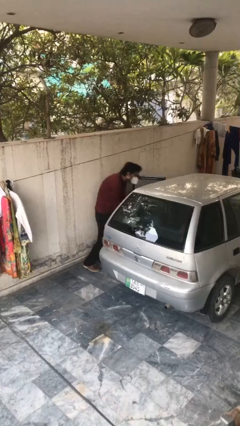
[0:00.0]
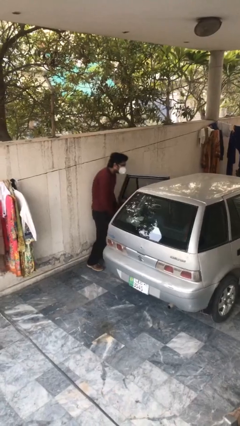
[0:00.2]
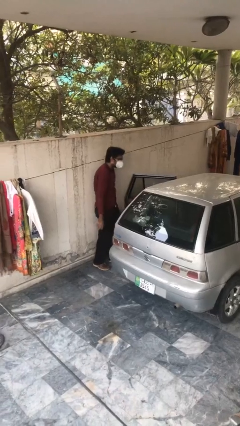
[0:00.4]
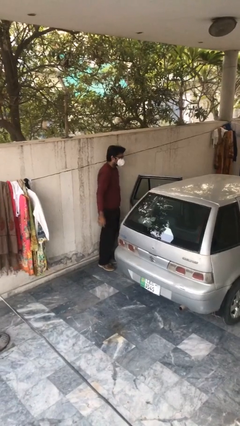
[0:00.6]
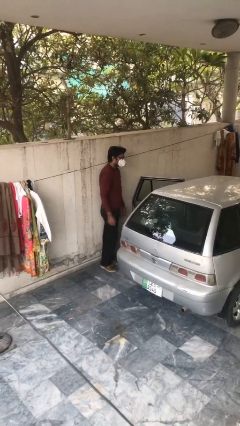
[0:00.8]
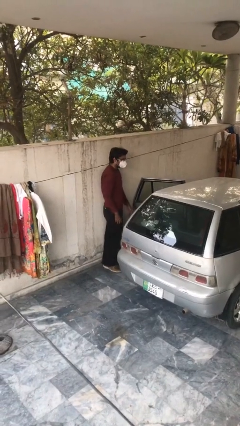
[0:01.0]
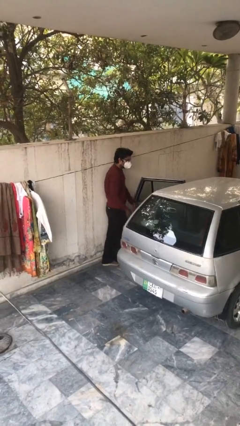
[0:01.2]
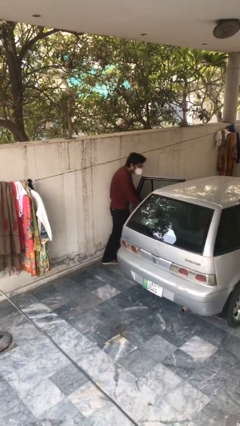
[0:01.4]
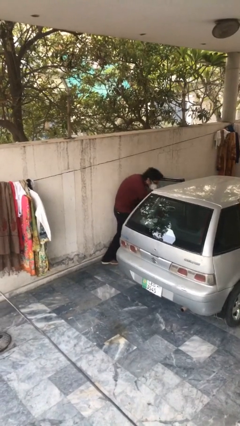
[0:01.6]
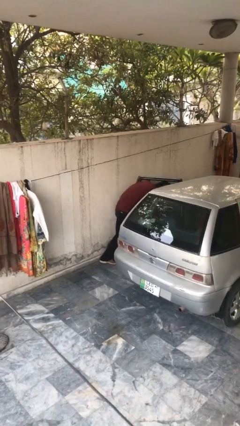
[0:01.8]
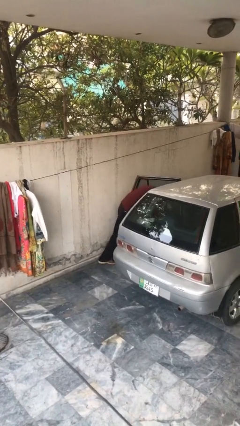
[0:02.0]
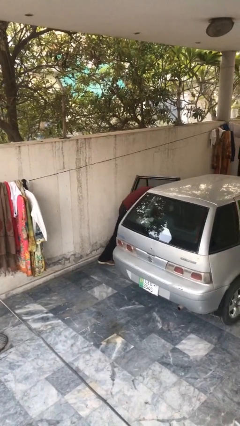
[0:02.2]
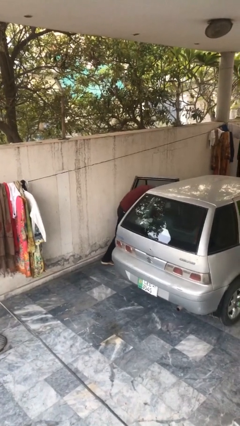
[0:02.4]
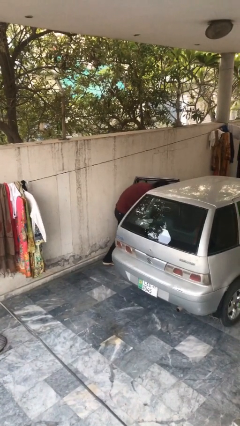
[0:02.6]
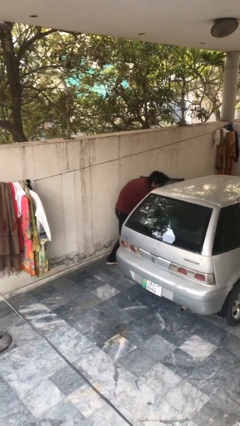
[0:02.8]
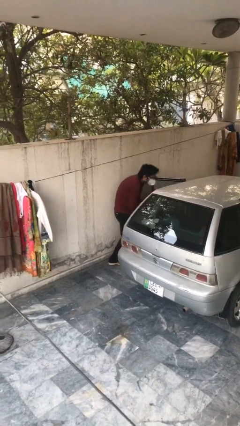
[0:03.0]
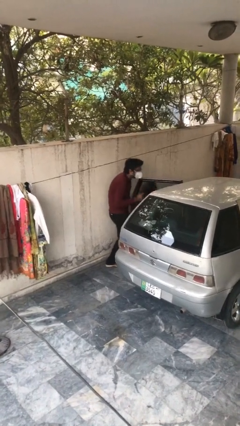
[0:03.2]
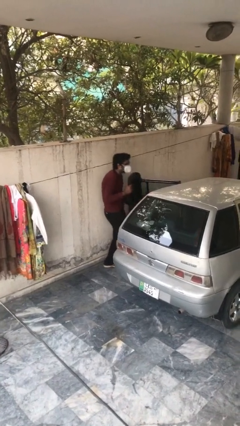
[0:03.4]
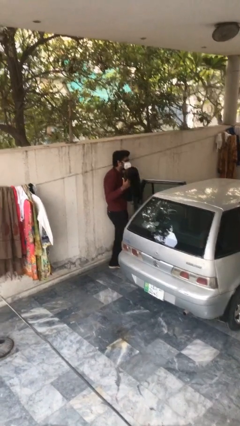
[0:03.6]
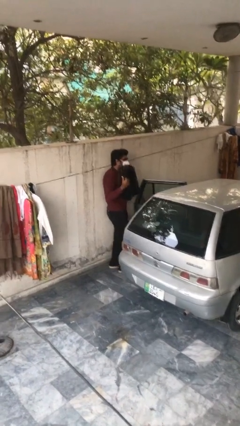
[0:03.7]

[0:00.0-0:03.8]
person unloads car

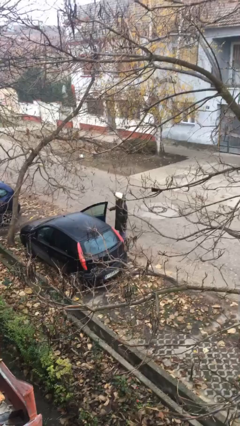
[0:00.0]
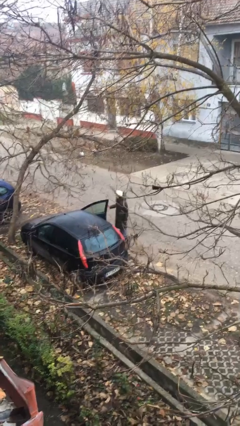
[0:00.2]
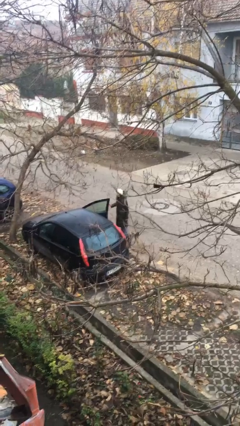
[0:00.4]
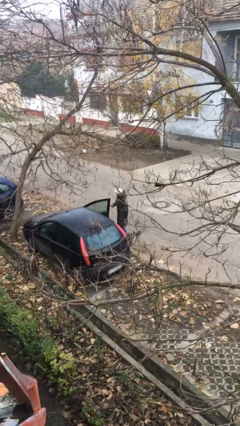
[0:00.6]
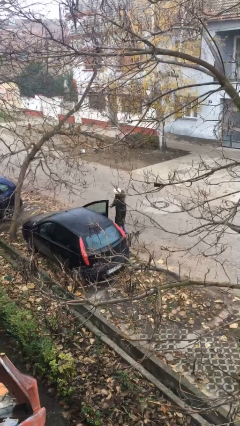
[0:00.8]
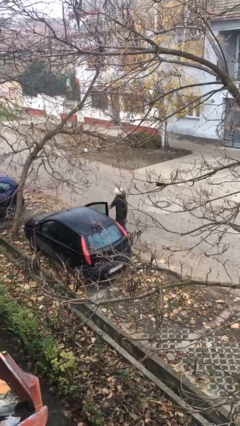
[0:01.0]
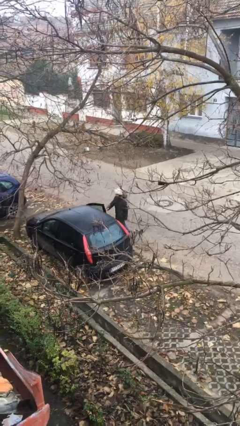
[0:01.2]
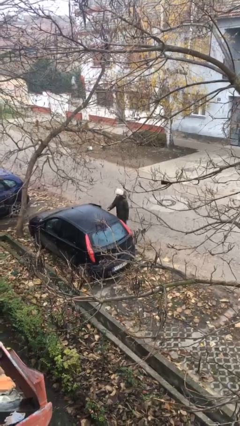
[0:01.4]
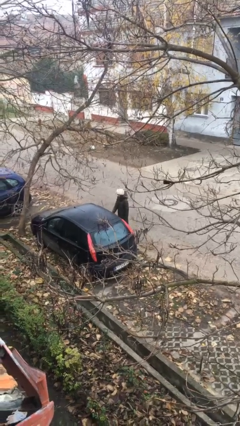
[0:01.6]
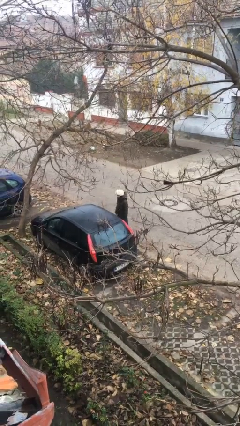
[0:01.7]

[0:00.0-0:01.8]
person closes car door

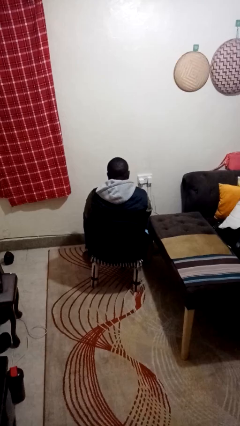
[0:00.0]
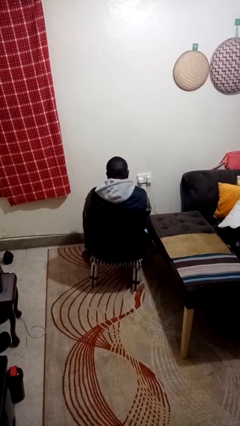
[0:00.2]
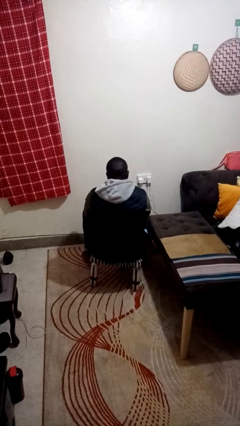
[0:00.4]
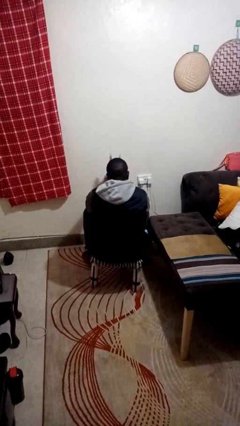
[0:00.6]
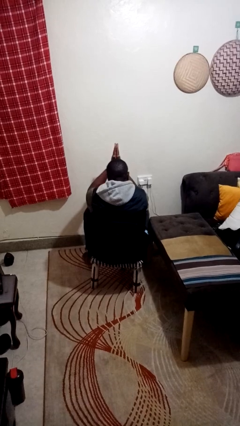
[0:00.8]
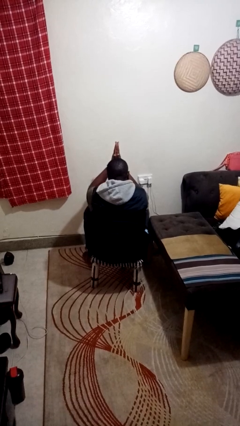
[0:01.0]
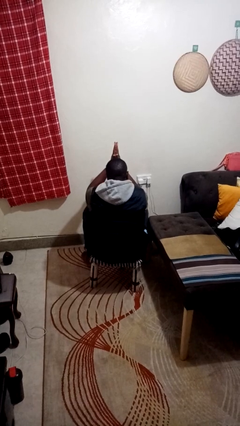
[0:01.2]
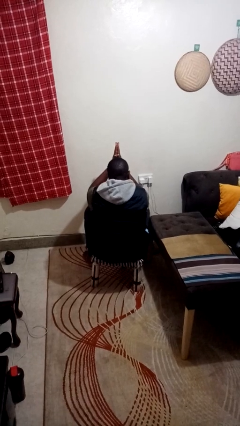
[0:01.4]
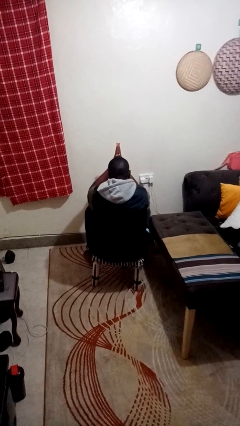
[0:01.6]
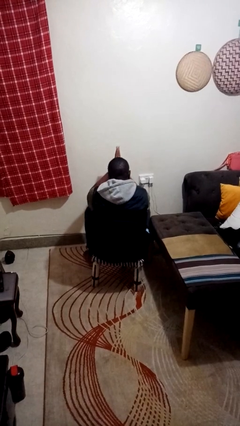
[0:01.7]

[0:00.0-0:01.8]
person claps hands

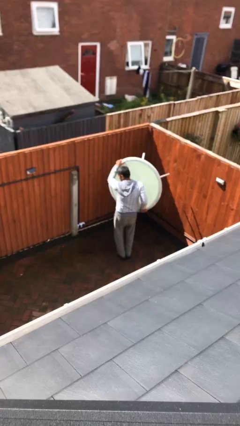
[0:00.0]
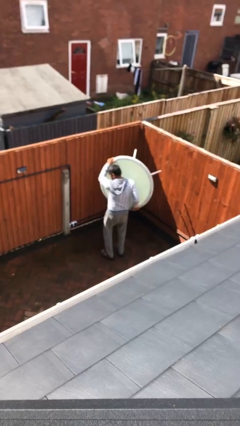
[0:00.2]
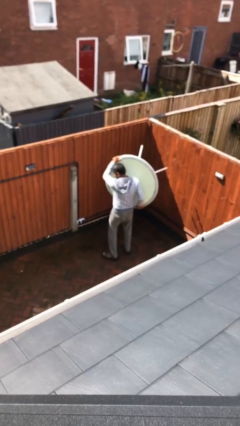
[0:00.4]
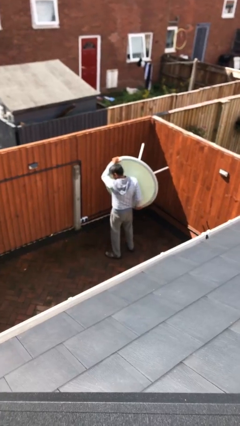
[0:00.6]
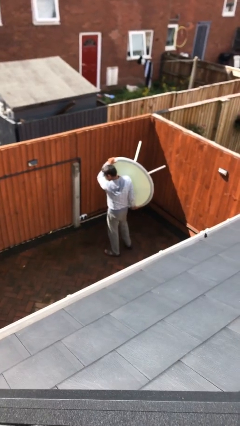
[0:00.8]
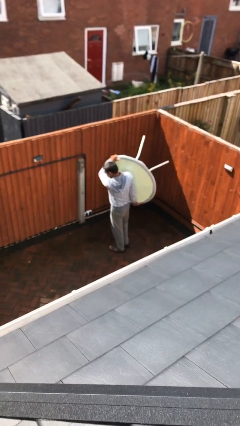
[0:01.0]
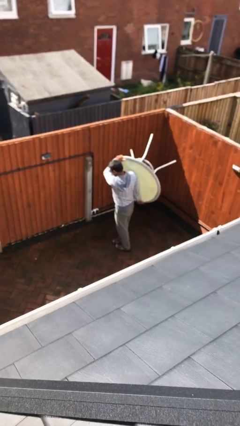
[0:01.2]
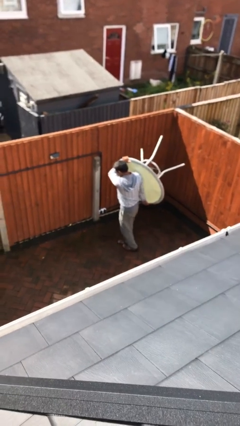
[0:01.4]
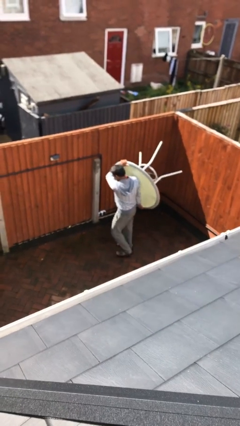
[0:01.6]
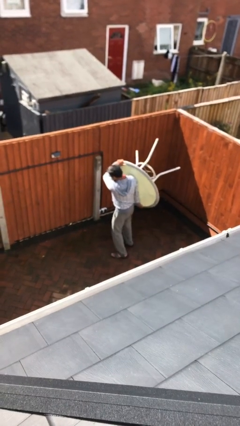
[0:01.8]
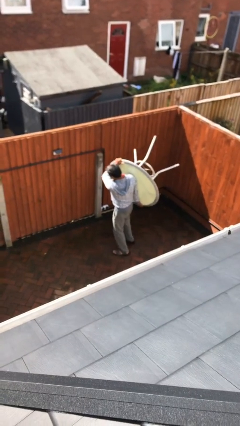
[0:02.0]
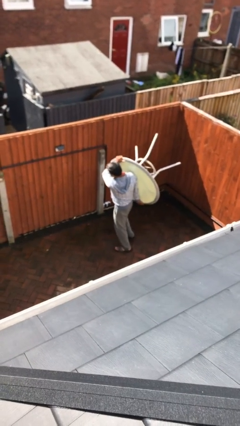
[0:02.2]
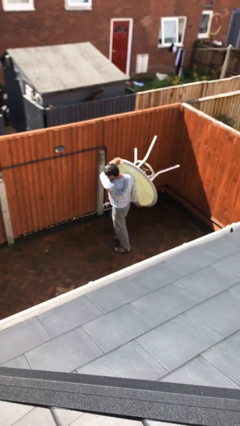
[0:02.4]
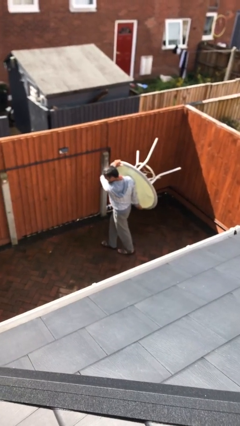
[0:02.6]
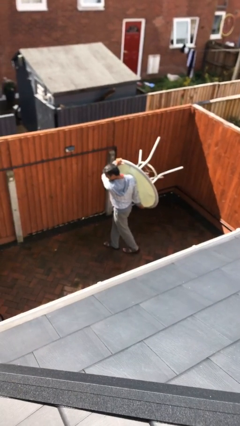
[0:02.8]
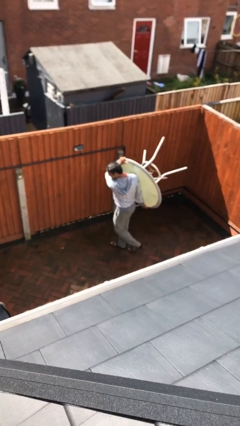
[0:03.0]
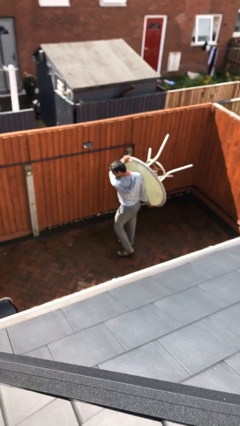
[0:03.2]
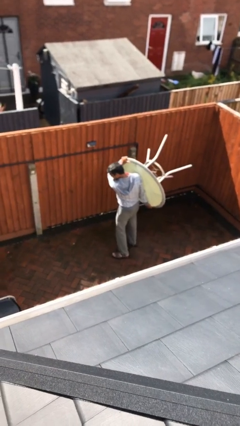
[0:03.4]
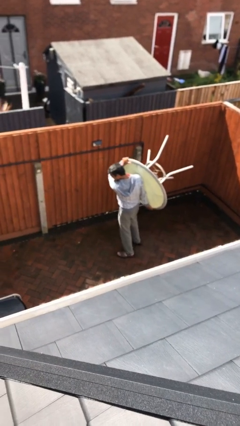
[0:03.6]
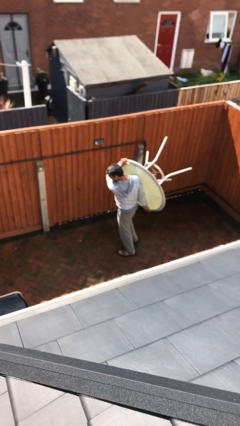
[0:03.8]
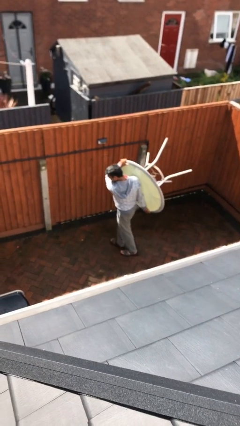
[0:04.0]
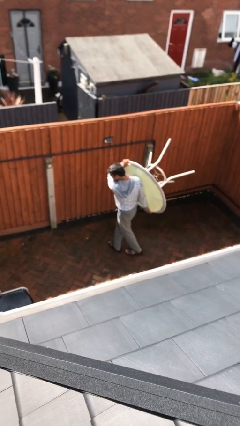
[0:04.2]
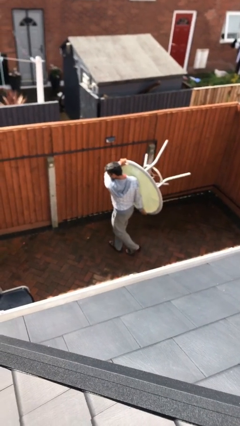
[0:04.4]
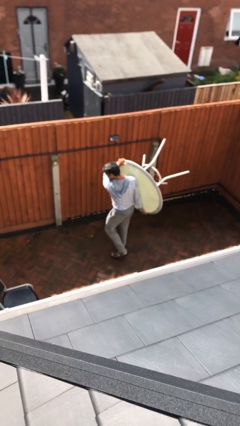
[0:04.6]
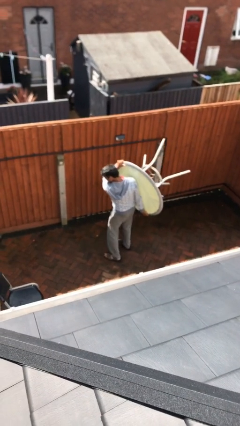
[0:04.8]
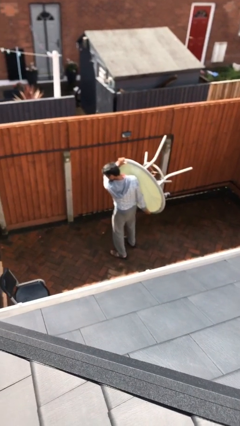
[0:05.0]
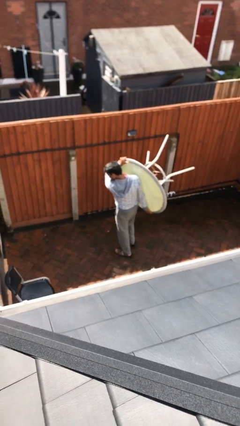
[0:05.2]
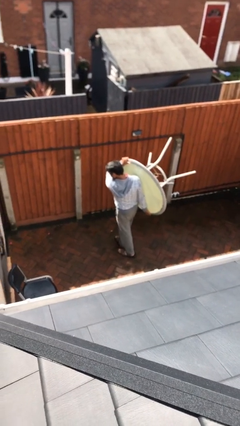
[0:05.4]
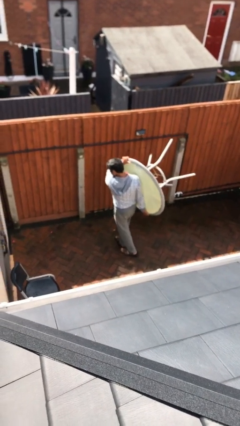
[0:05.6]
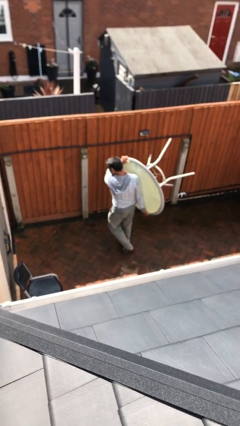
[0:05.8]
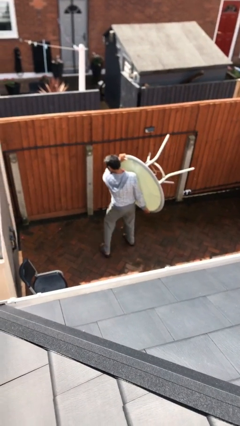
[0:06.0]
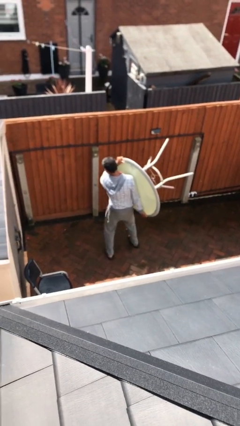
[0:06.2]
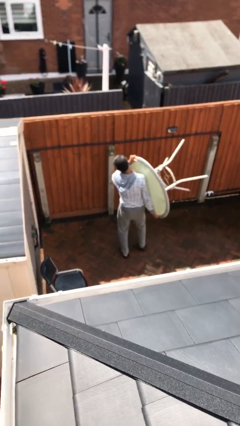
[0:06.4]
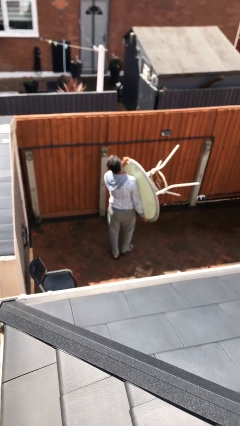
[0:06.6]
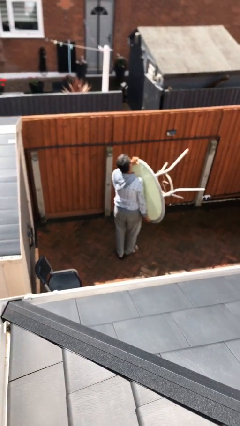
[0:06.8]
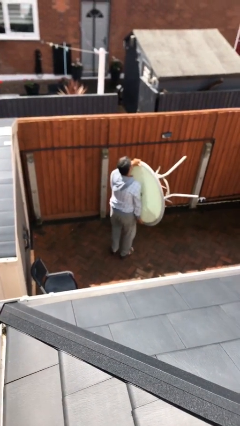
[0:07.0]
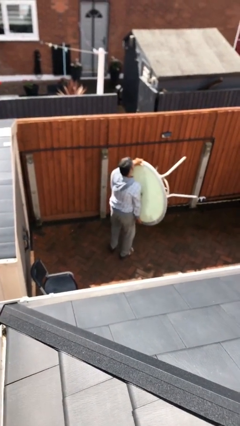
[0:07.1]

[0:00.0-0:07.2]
person carries heavy object

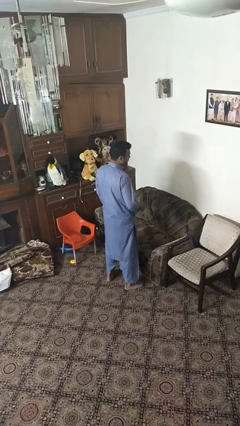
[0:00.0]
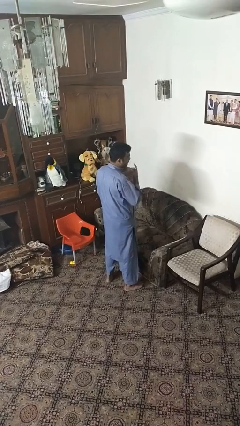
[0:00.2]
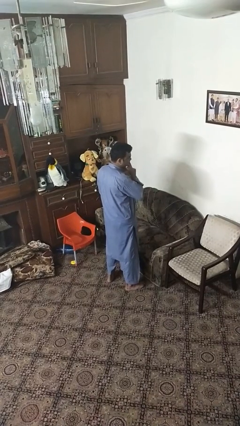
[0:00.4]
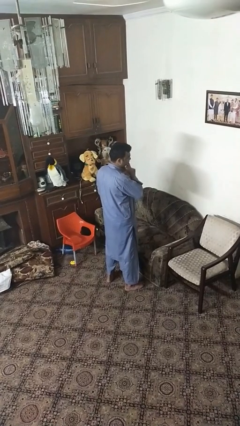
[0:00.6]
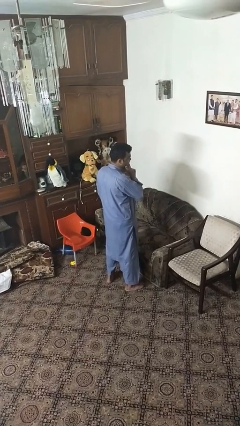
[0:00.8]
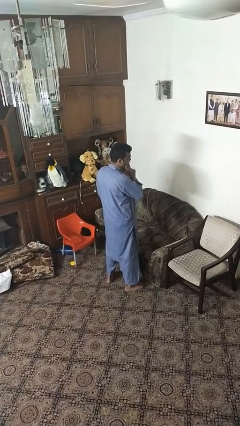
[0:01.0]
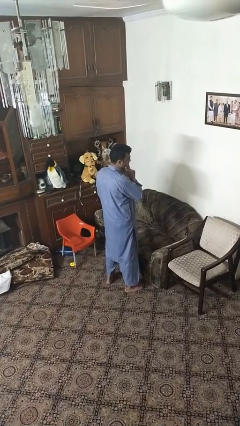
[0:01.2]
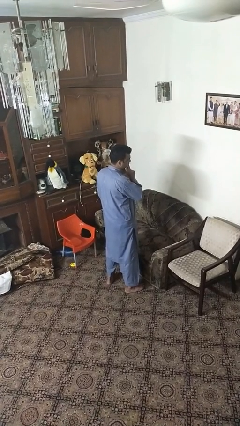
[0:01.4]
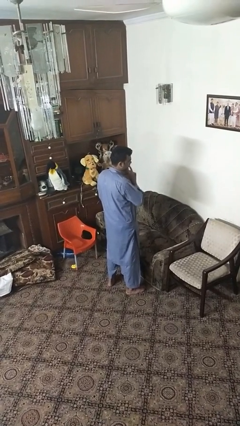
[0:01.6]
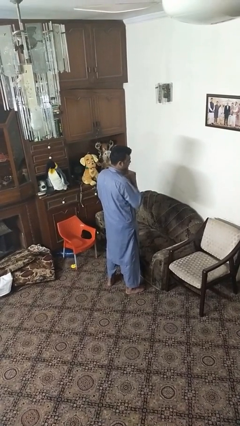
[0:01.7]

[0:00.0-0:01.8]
person strokes chin

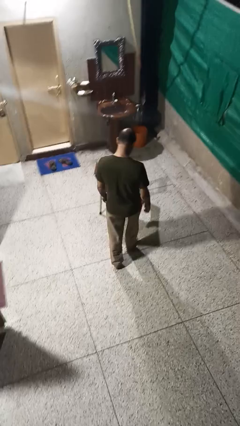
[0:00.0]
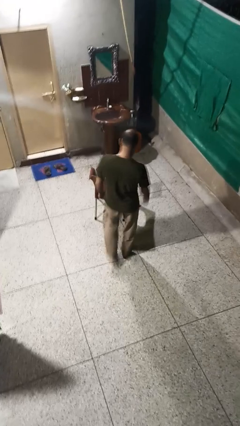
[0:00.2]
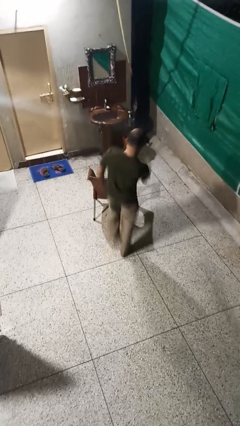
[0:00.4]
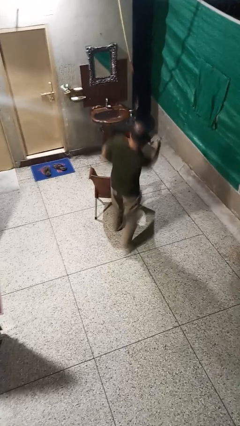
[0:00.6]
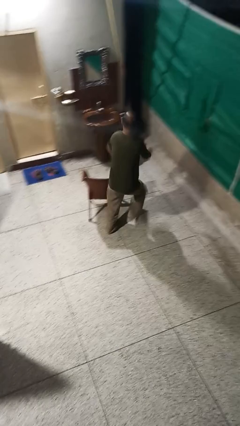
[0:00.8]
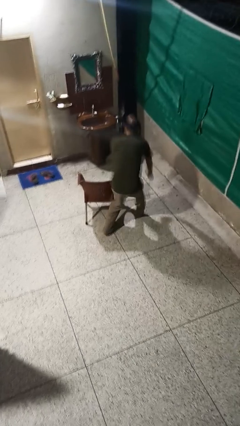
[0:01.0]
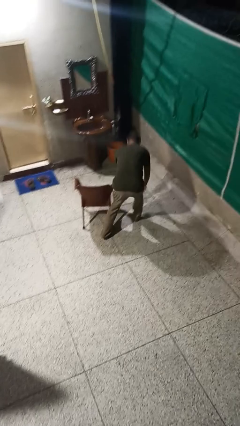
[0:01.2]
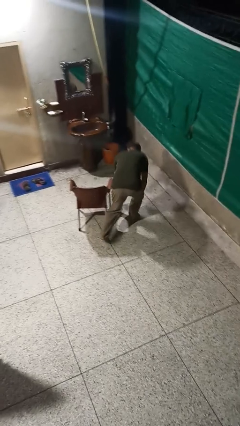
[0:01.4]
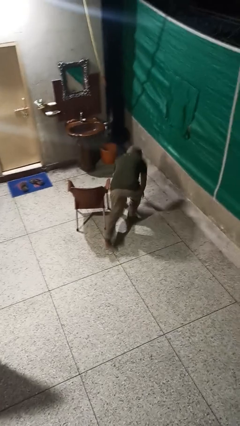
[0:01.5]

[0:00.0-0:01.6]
person trips on object on floor
